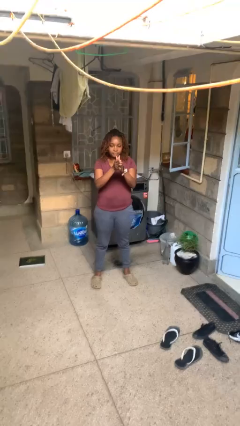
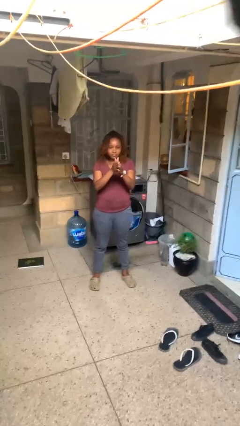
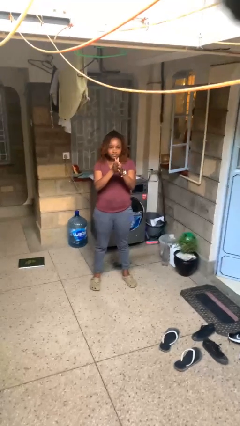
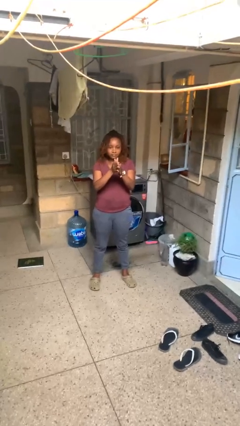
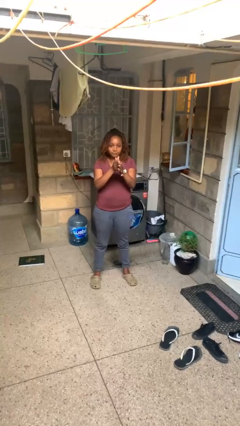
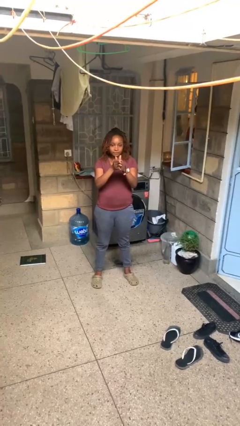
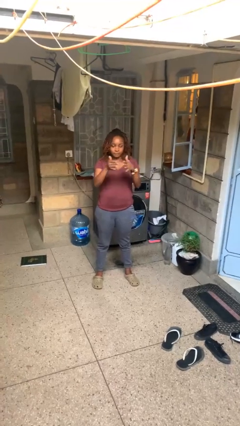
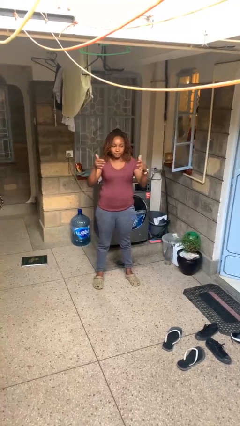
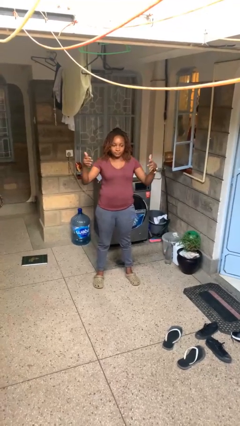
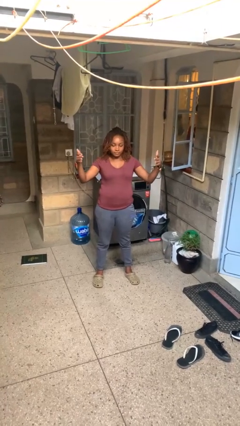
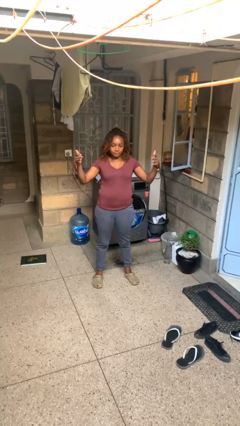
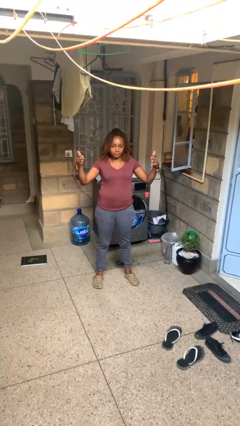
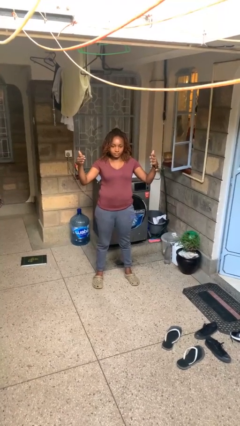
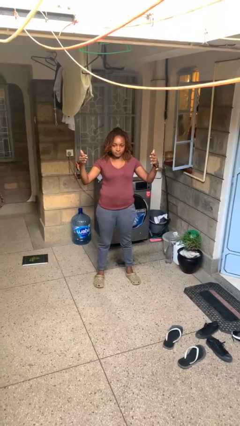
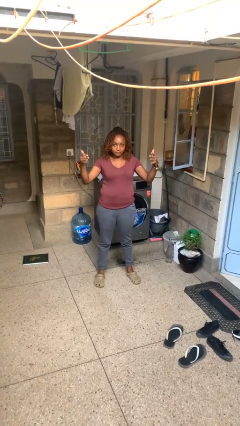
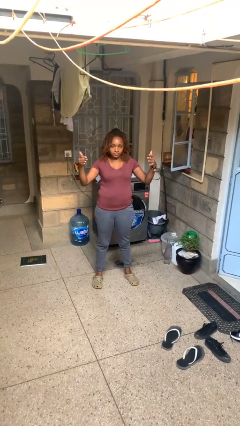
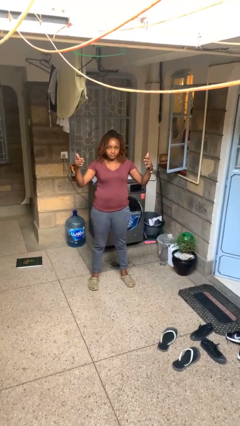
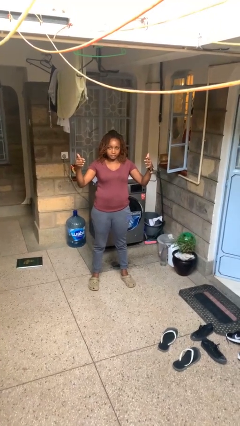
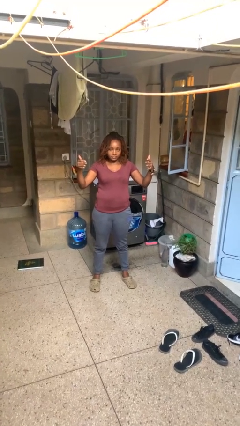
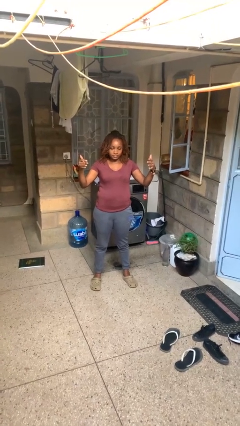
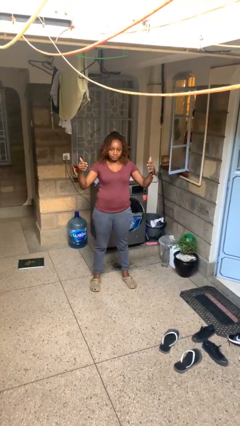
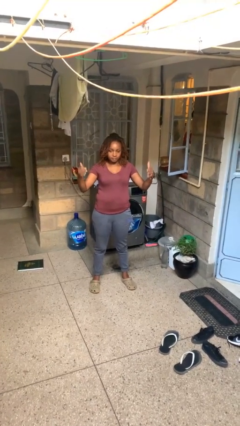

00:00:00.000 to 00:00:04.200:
person gestures zoom out

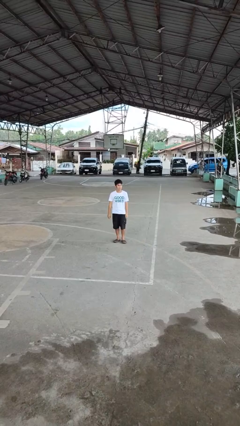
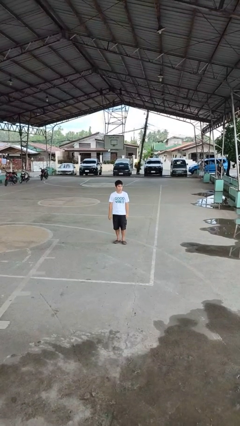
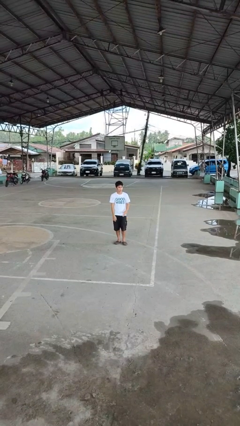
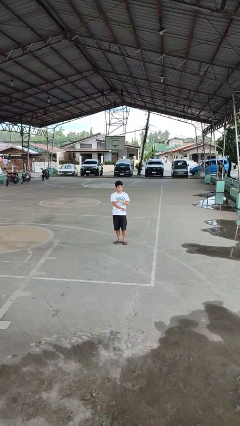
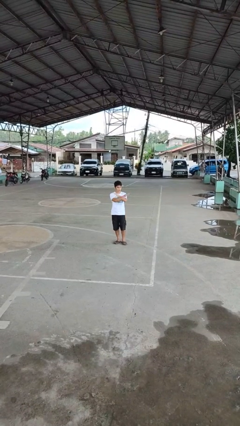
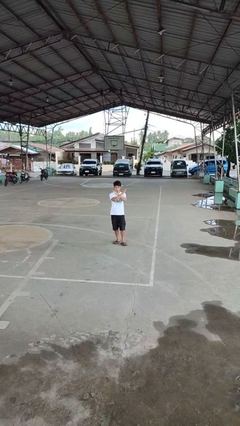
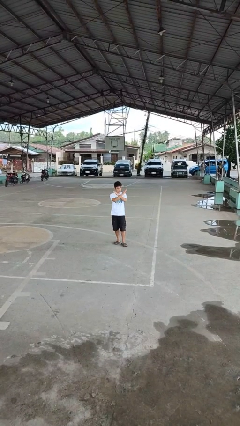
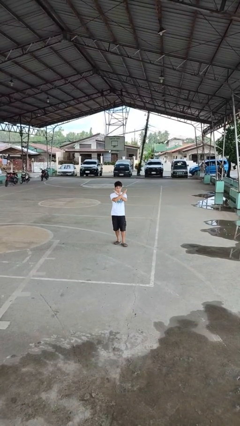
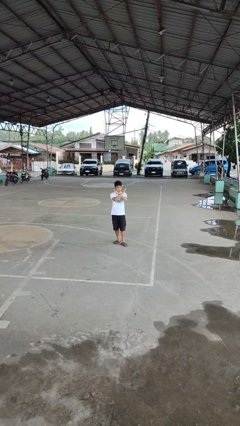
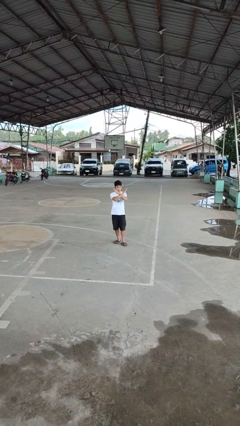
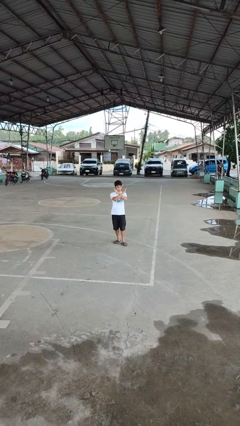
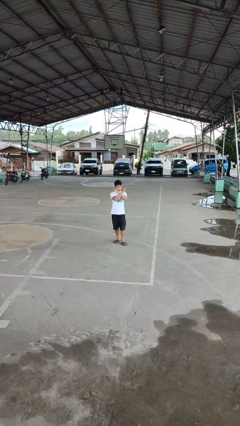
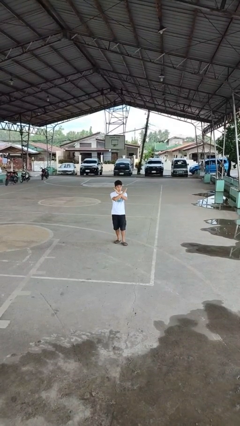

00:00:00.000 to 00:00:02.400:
person gestures arms x

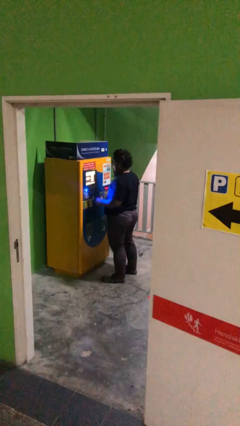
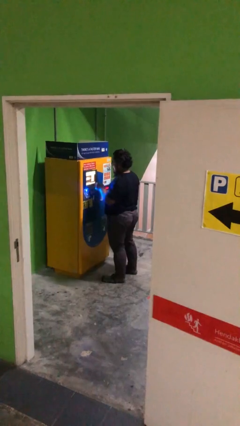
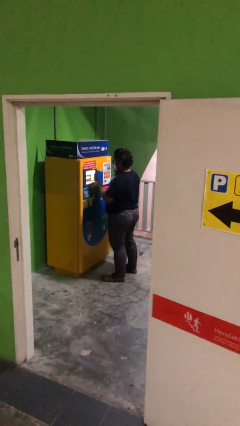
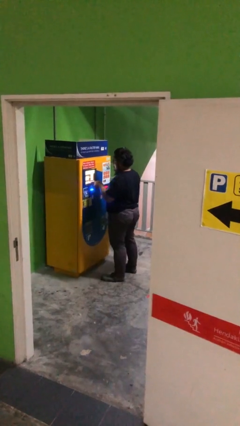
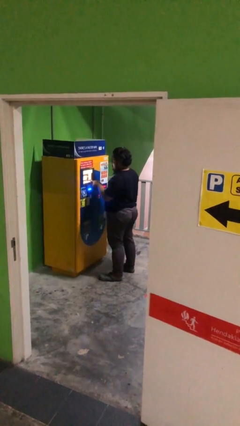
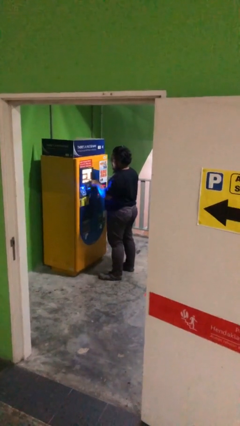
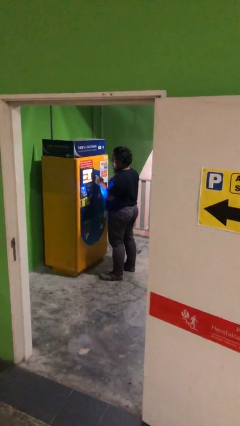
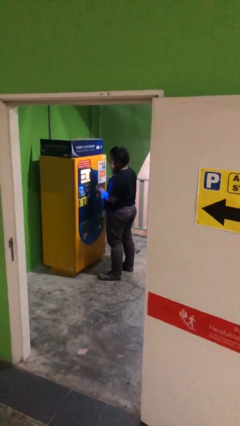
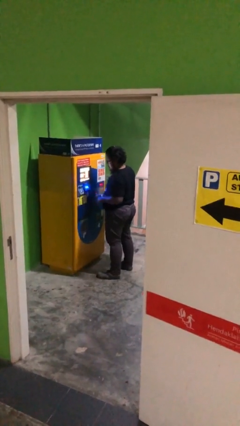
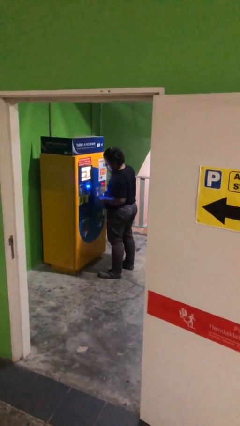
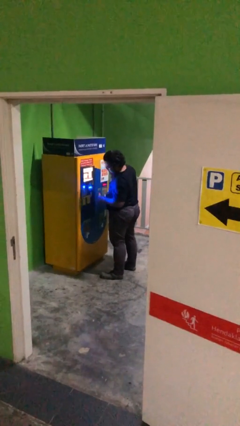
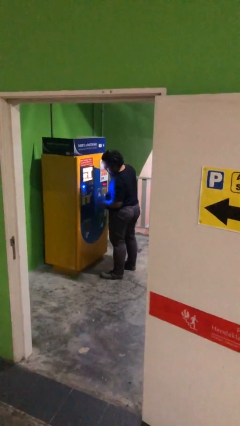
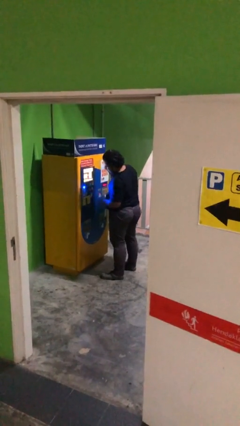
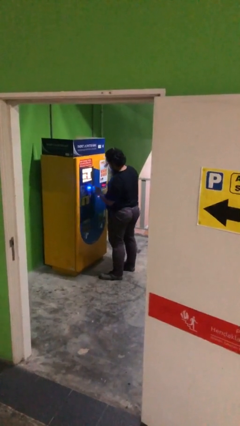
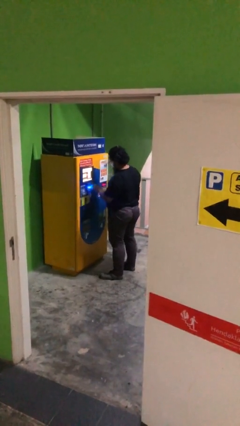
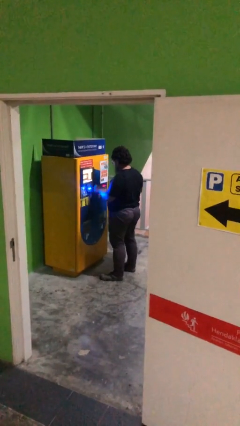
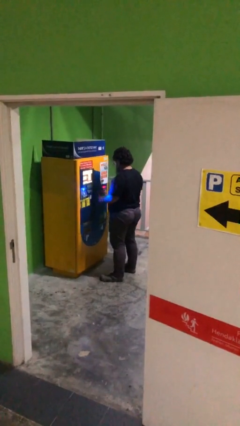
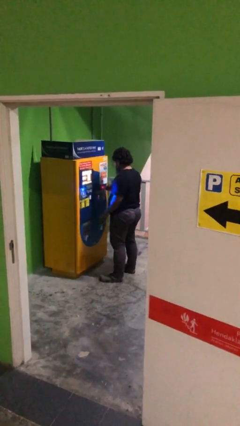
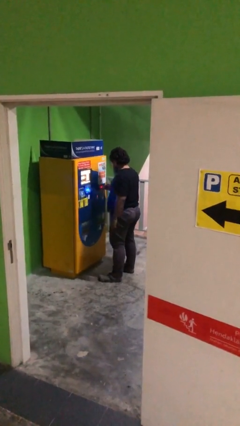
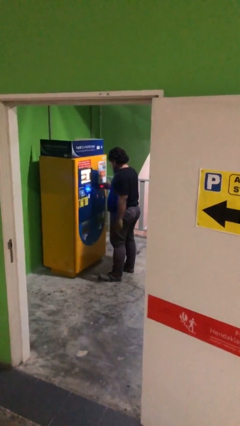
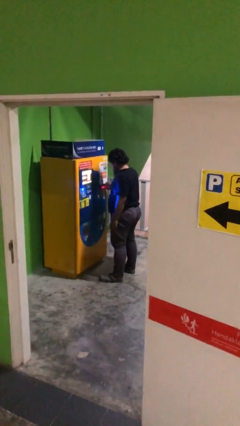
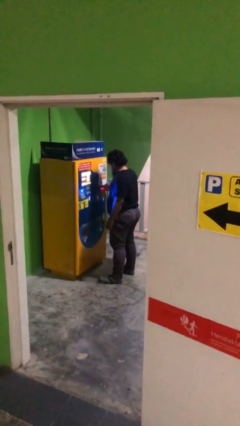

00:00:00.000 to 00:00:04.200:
person purchases from machine

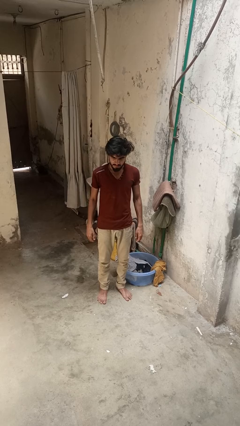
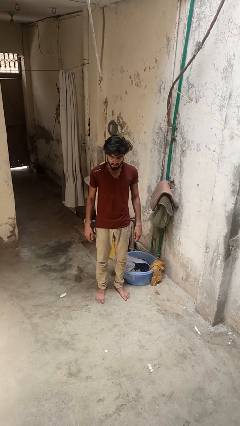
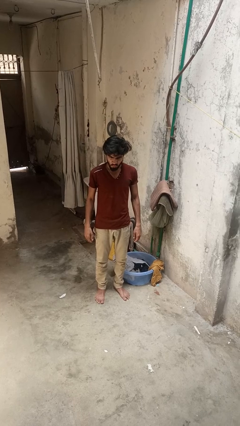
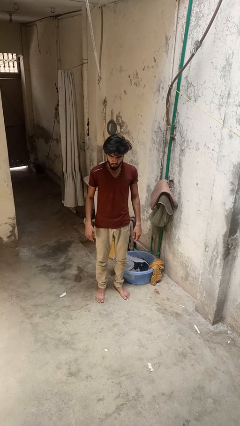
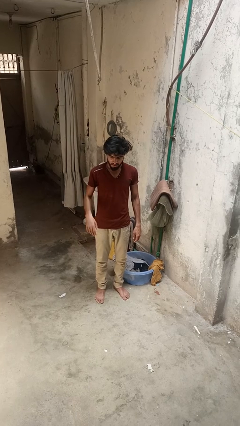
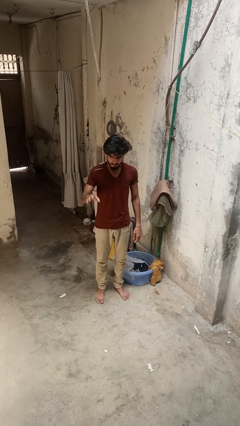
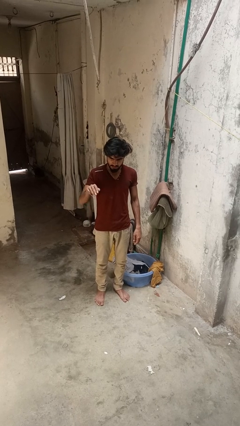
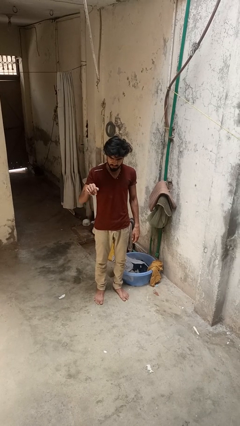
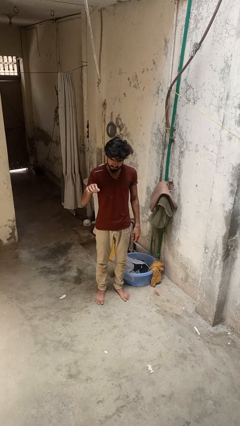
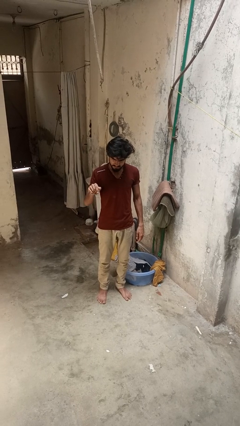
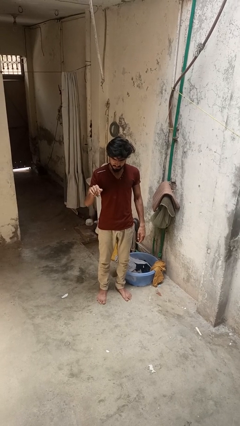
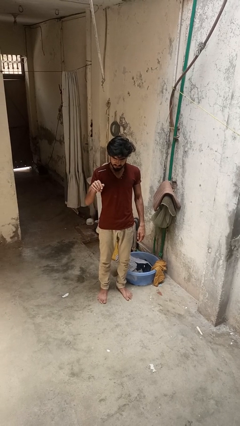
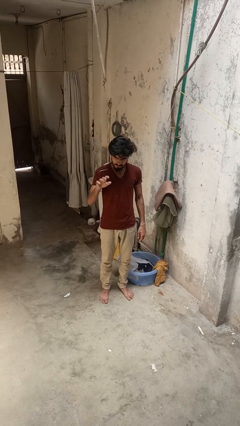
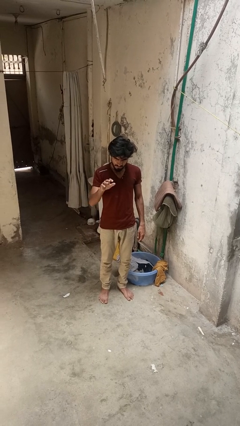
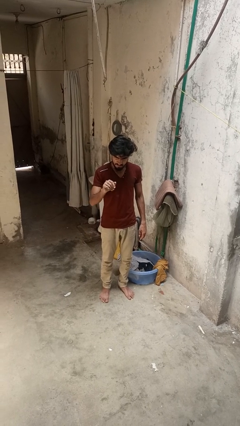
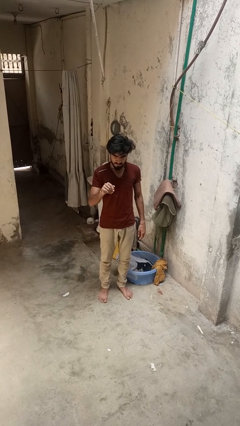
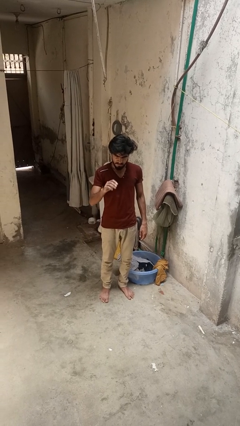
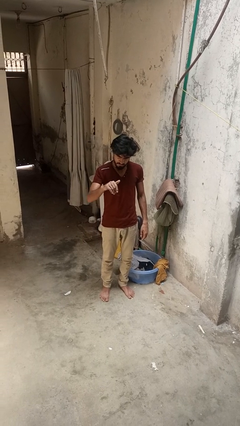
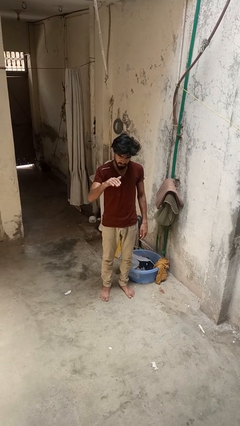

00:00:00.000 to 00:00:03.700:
person gestures come here

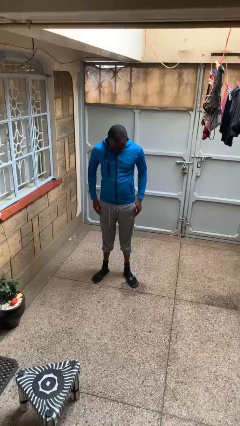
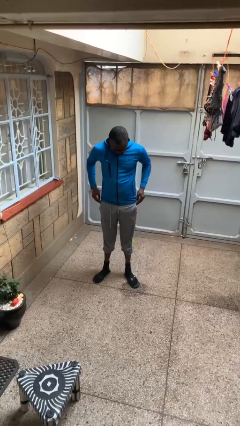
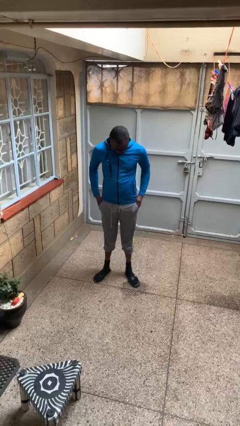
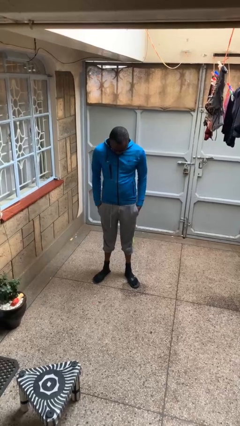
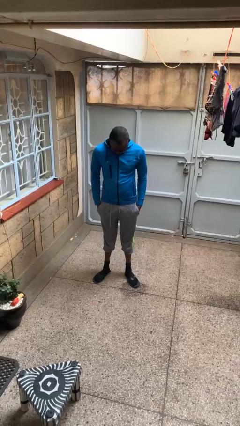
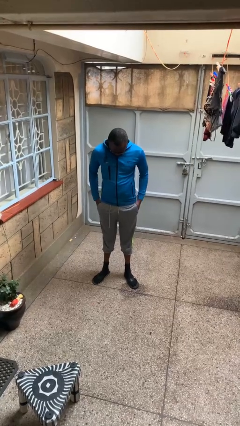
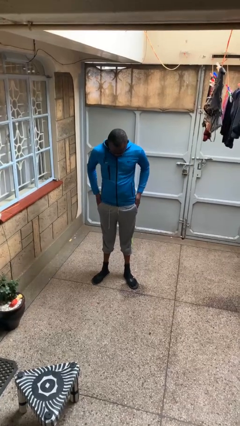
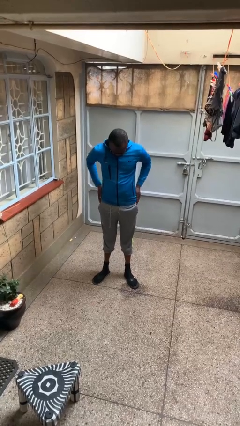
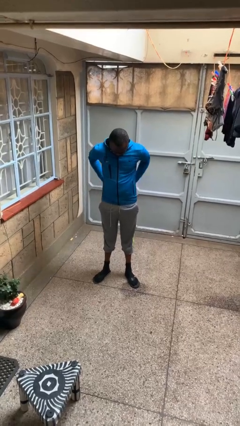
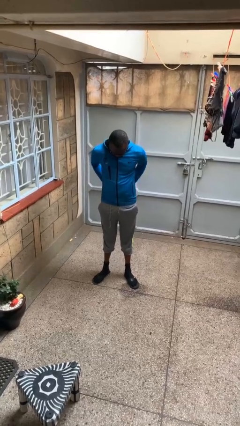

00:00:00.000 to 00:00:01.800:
person puts hands in back pockets

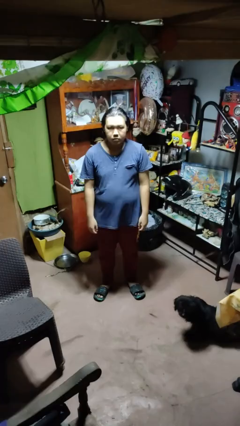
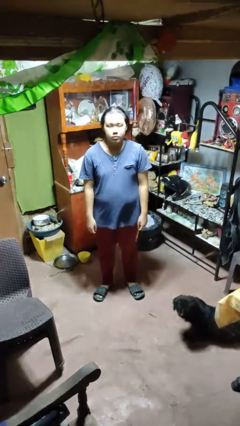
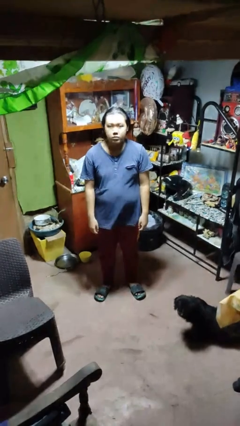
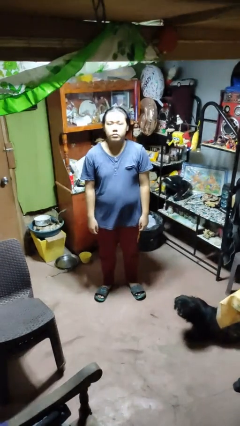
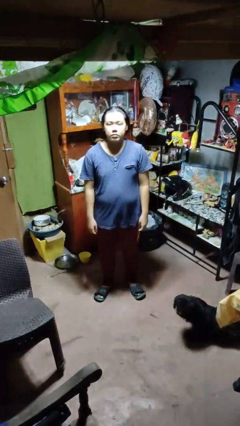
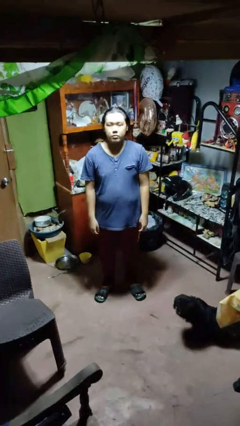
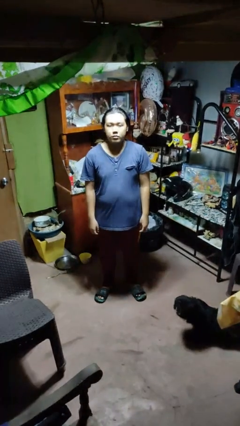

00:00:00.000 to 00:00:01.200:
person nods head
